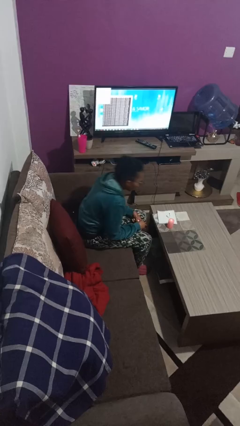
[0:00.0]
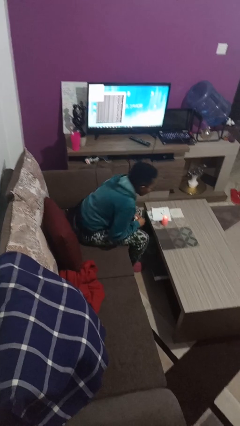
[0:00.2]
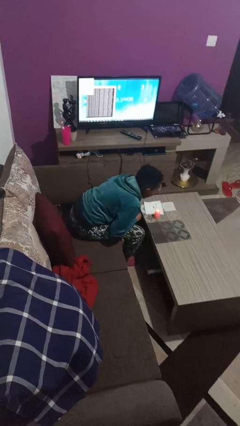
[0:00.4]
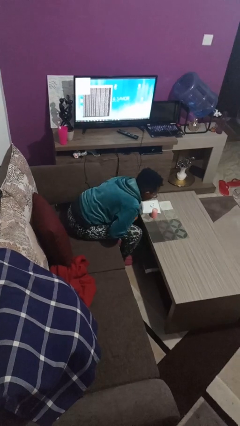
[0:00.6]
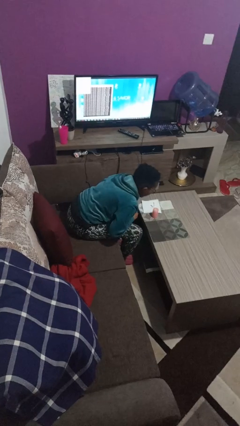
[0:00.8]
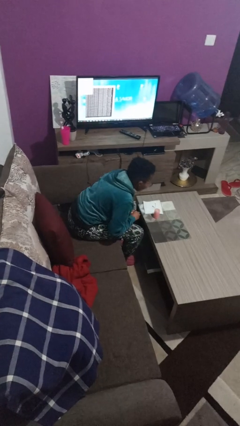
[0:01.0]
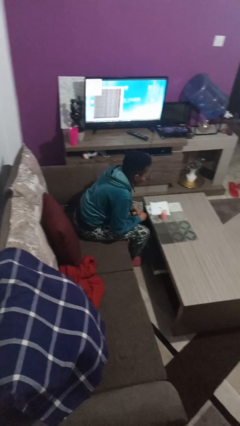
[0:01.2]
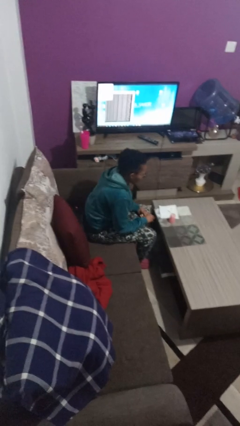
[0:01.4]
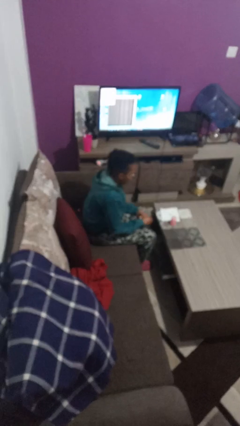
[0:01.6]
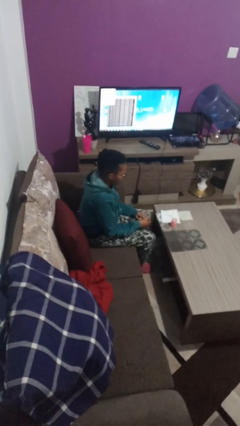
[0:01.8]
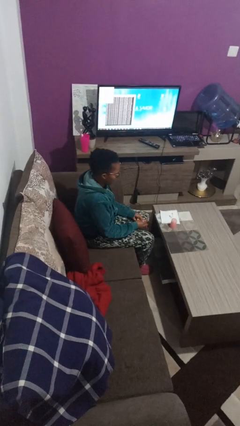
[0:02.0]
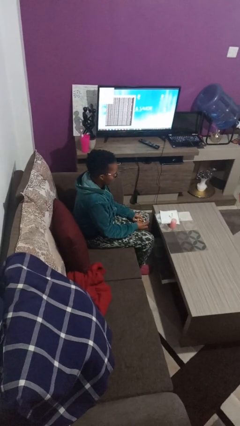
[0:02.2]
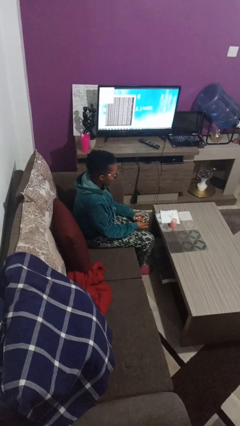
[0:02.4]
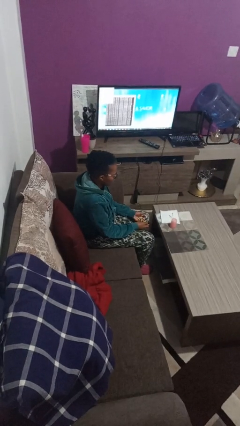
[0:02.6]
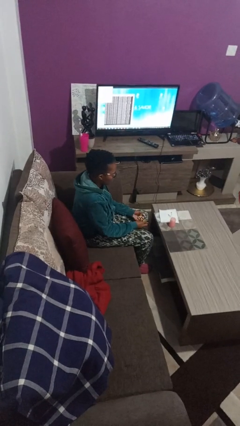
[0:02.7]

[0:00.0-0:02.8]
person extinguishes candle

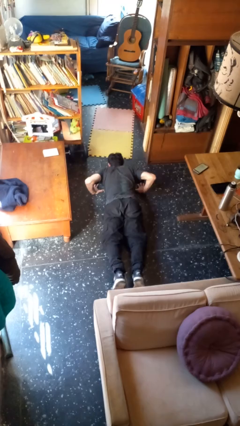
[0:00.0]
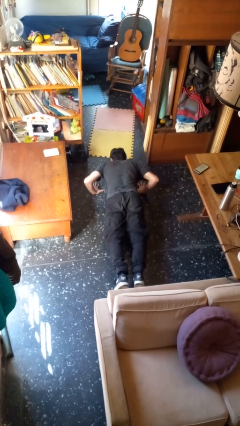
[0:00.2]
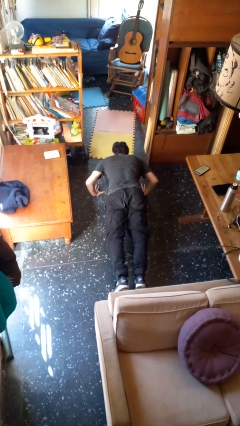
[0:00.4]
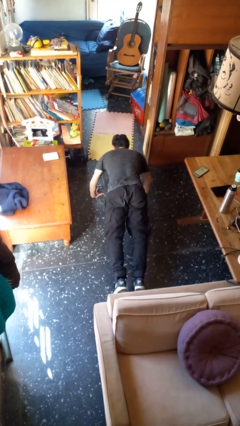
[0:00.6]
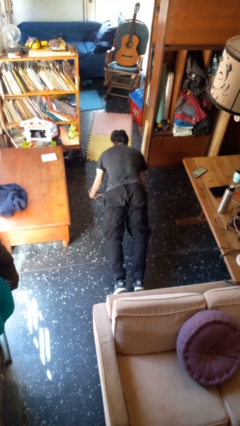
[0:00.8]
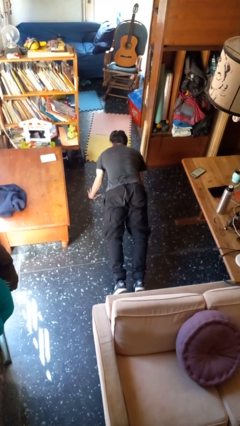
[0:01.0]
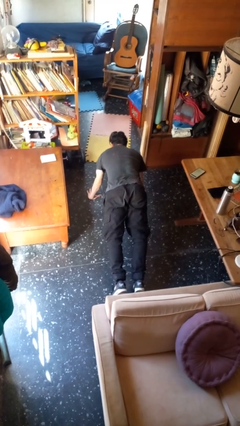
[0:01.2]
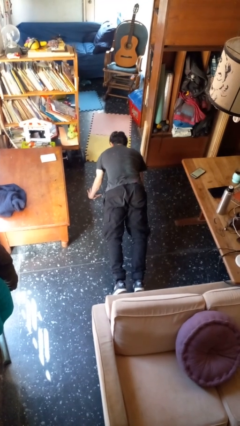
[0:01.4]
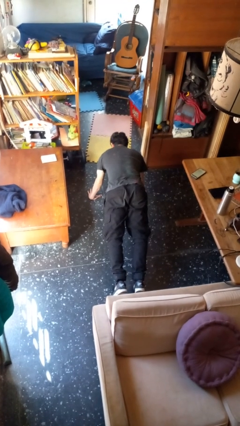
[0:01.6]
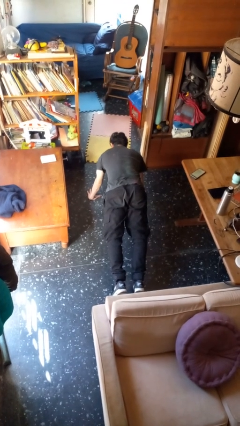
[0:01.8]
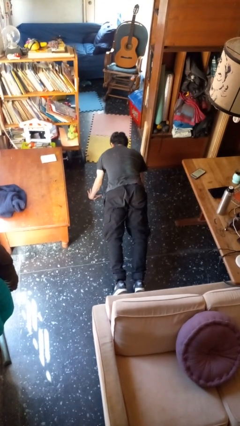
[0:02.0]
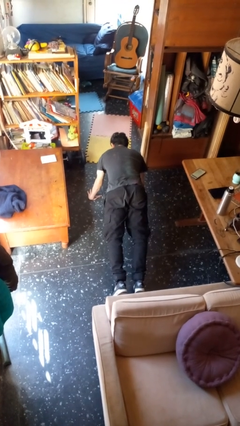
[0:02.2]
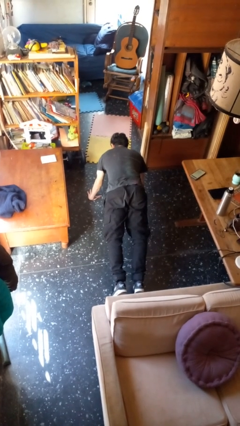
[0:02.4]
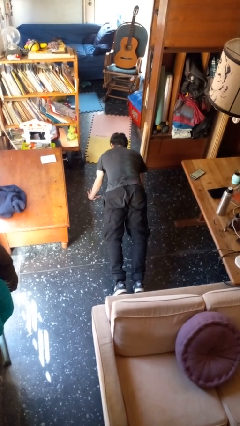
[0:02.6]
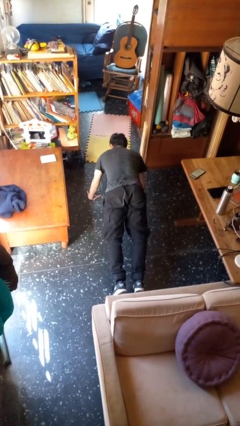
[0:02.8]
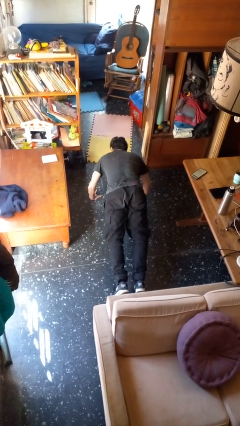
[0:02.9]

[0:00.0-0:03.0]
person exercises with pushup

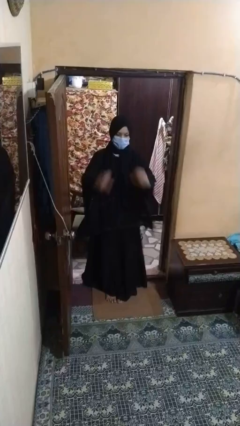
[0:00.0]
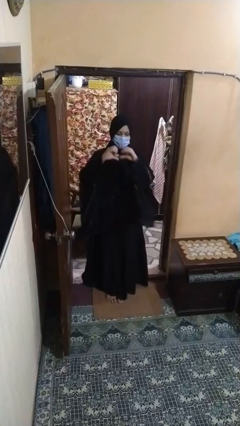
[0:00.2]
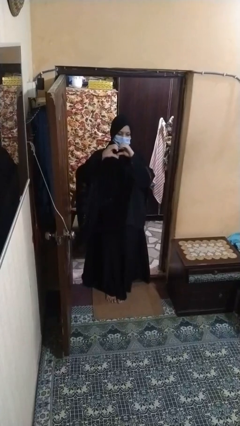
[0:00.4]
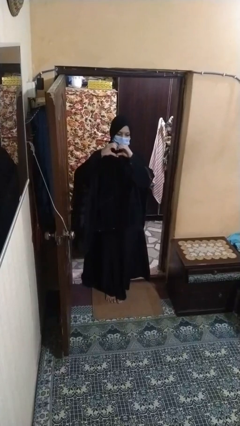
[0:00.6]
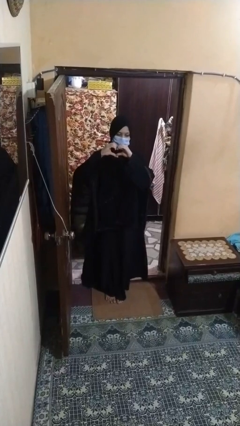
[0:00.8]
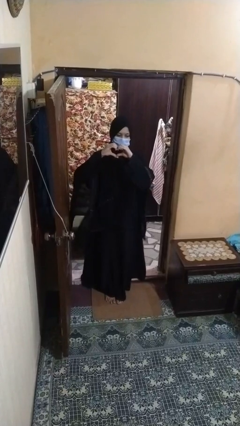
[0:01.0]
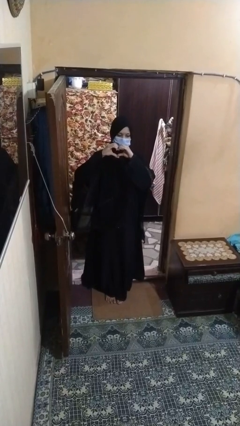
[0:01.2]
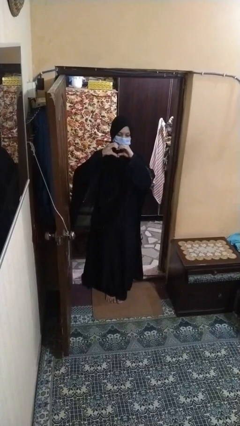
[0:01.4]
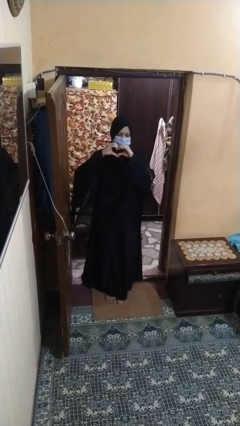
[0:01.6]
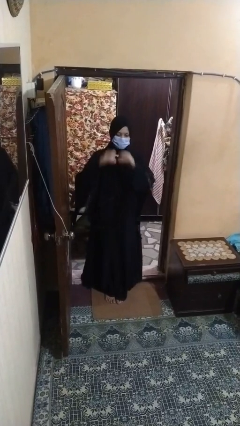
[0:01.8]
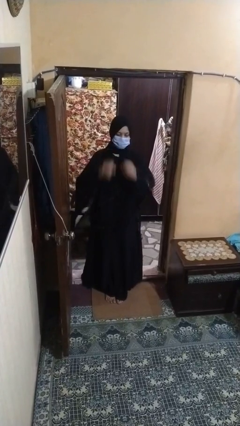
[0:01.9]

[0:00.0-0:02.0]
person gestures heart

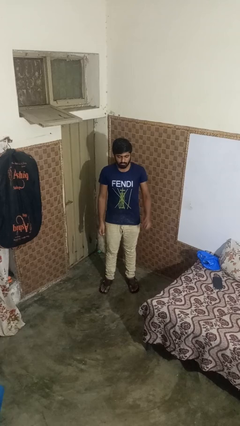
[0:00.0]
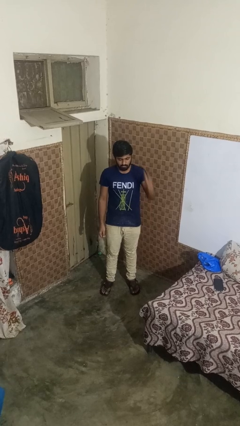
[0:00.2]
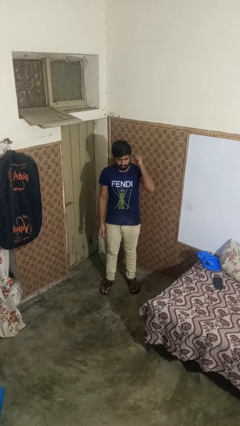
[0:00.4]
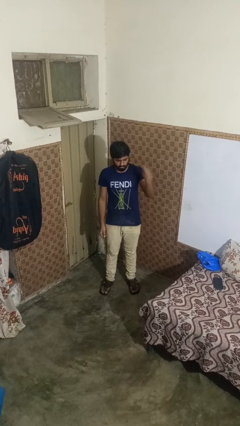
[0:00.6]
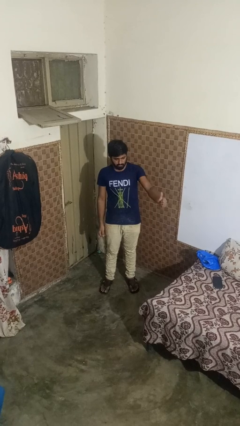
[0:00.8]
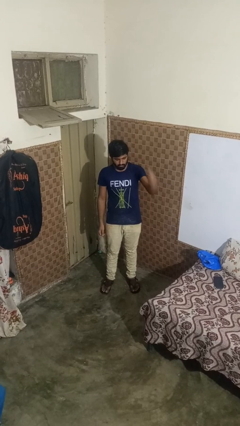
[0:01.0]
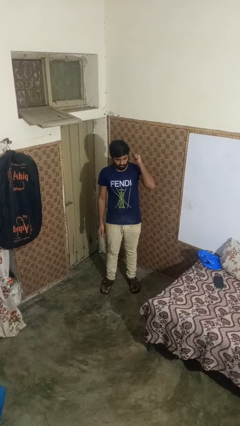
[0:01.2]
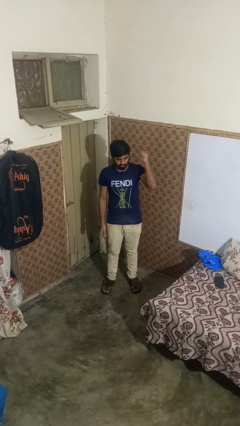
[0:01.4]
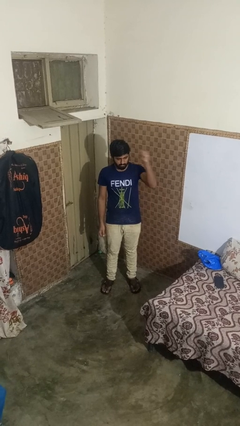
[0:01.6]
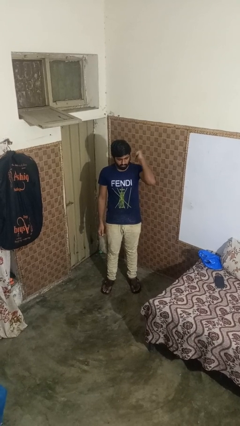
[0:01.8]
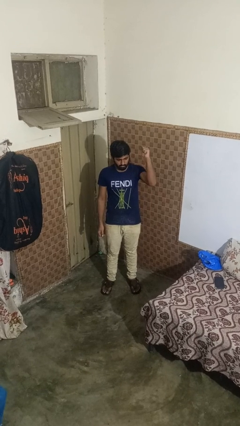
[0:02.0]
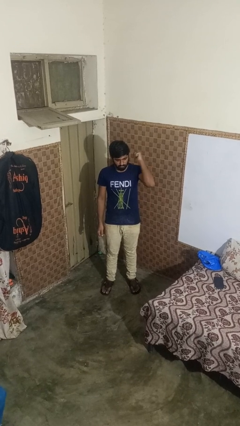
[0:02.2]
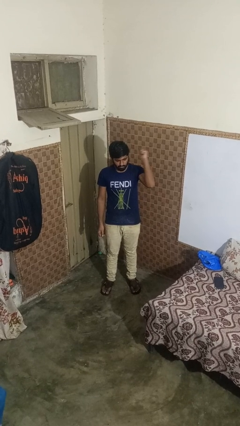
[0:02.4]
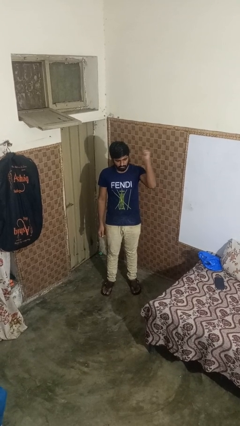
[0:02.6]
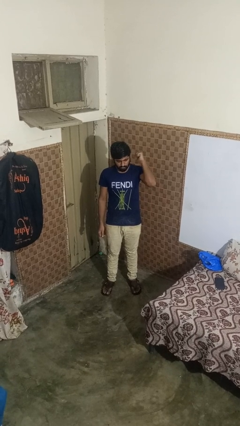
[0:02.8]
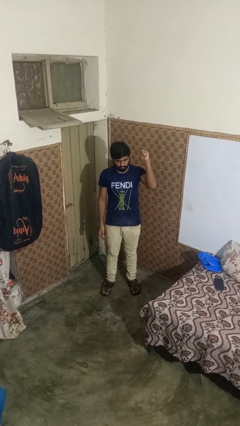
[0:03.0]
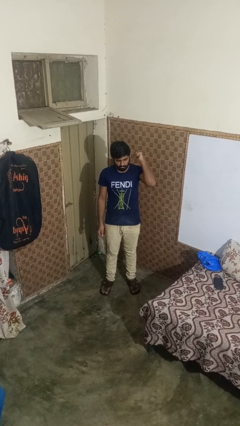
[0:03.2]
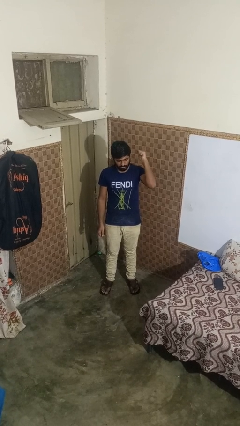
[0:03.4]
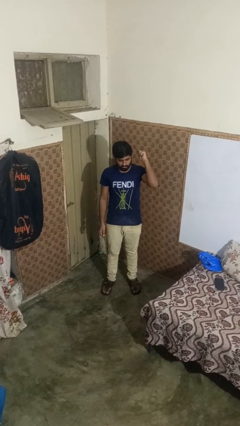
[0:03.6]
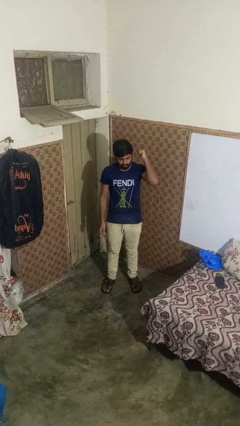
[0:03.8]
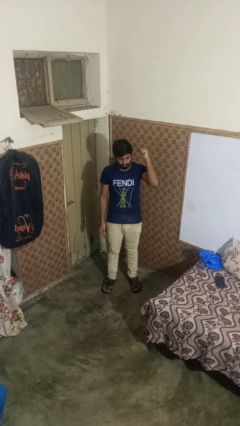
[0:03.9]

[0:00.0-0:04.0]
person gestures behind me

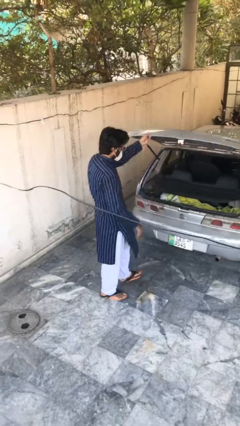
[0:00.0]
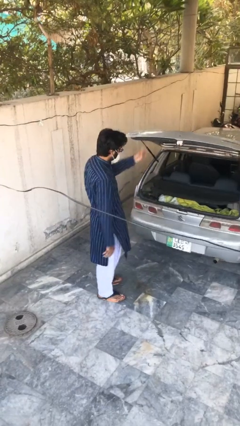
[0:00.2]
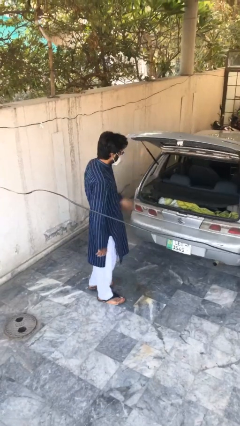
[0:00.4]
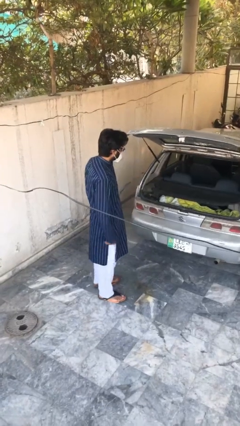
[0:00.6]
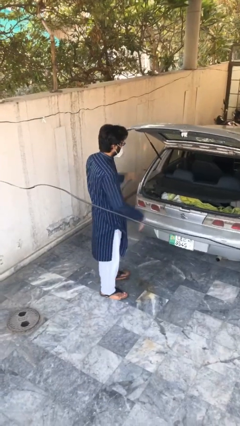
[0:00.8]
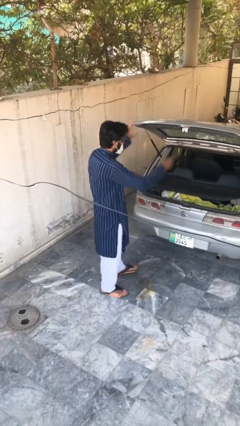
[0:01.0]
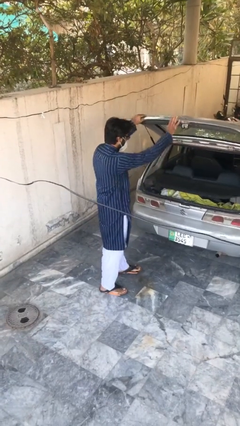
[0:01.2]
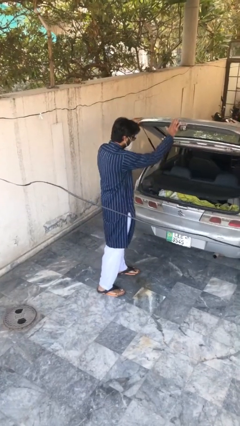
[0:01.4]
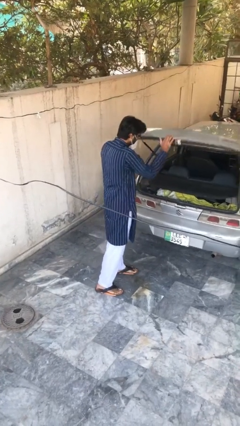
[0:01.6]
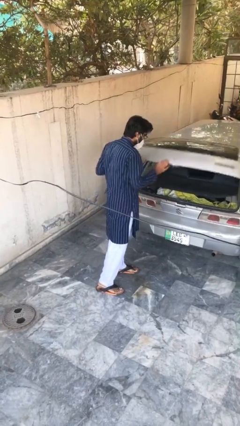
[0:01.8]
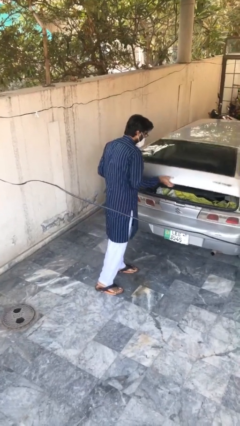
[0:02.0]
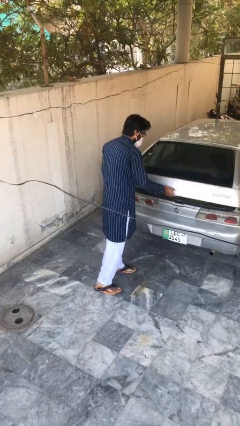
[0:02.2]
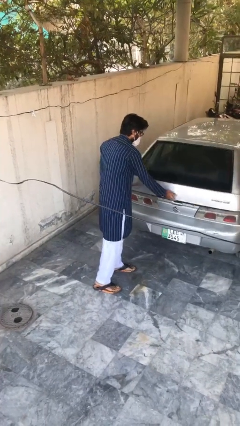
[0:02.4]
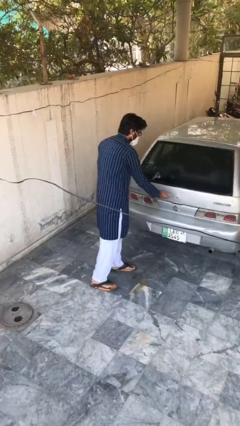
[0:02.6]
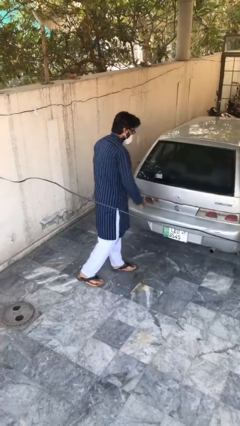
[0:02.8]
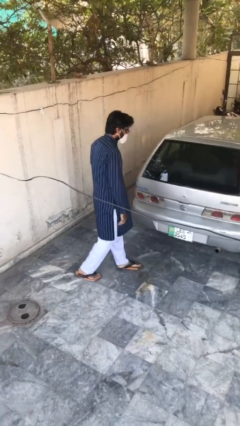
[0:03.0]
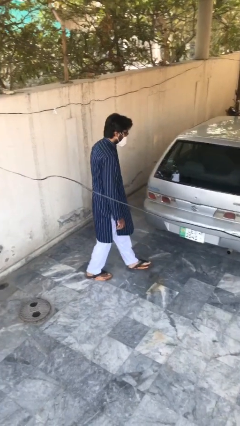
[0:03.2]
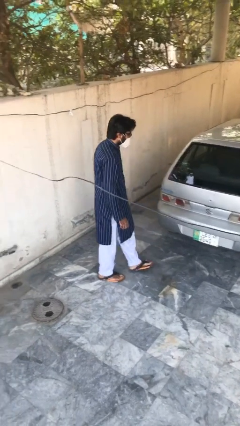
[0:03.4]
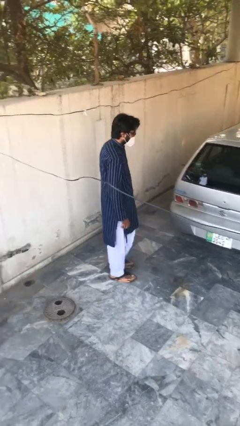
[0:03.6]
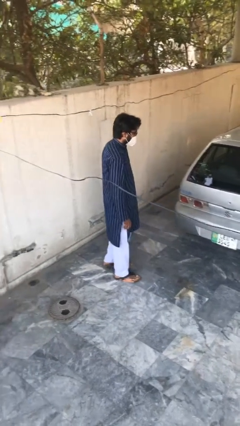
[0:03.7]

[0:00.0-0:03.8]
person closes car trunk

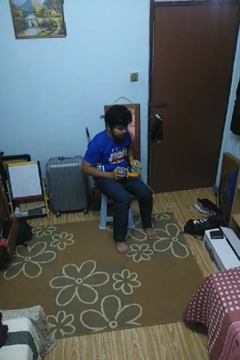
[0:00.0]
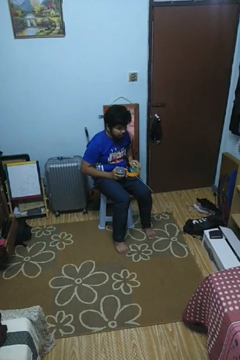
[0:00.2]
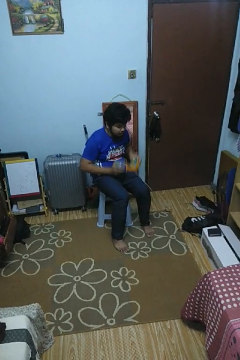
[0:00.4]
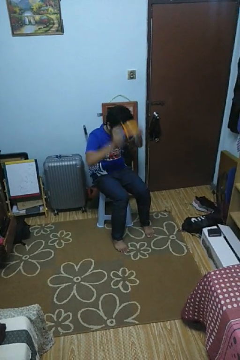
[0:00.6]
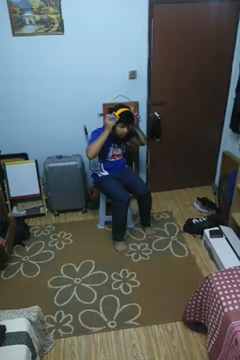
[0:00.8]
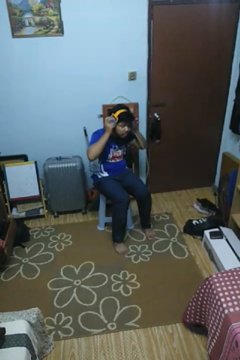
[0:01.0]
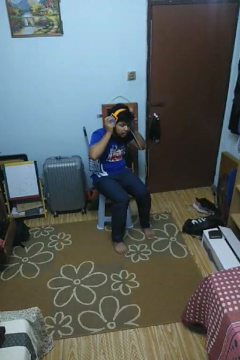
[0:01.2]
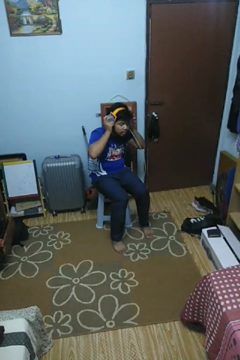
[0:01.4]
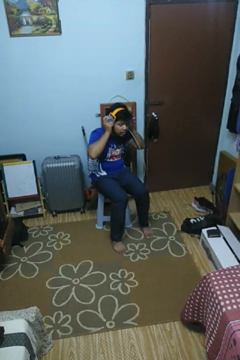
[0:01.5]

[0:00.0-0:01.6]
person puts on headphones

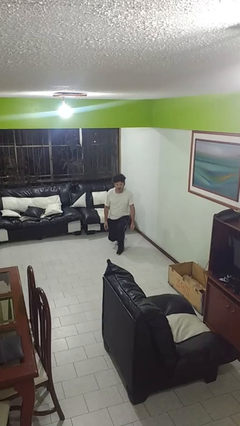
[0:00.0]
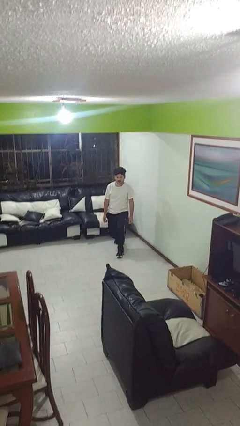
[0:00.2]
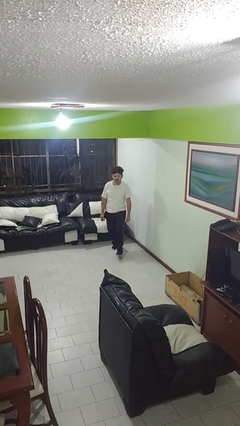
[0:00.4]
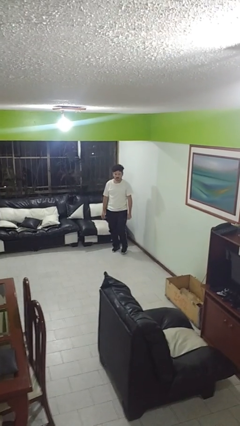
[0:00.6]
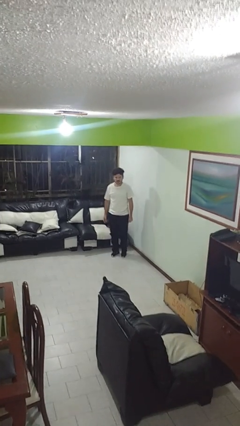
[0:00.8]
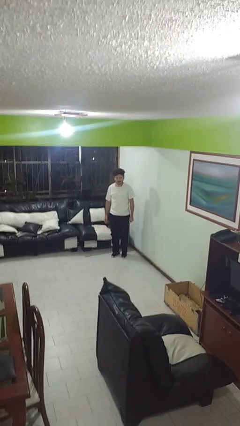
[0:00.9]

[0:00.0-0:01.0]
person stands up from floor
